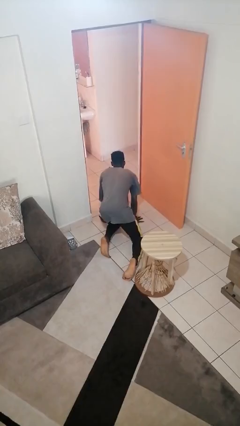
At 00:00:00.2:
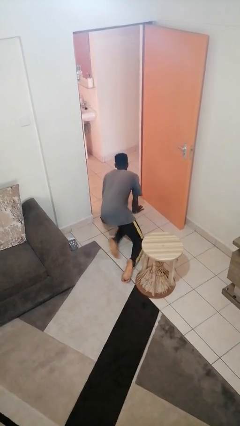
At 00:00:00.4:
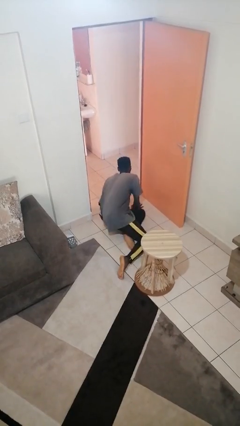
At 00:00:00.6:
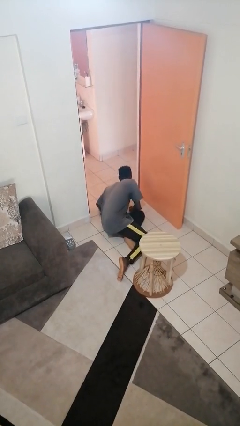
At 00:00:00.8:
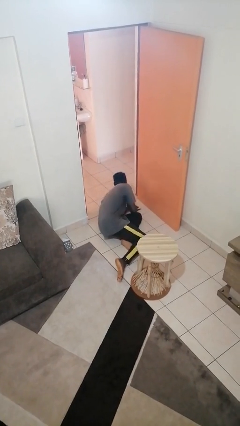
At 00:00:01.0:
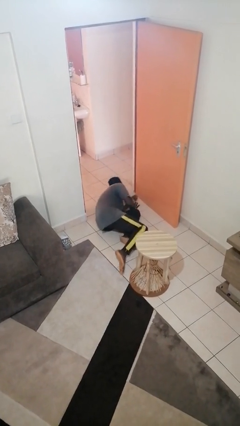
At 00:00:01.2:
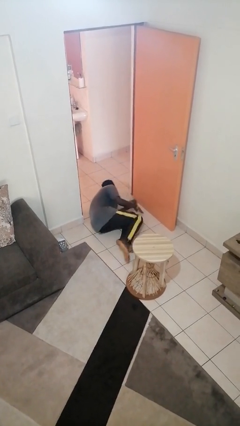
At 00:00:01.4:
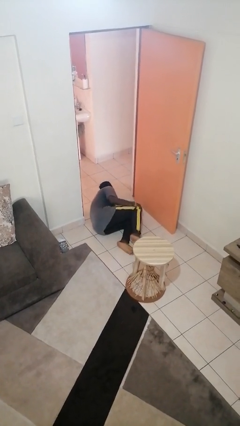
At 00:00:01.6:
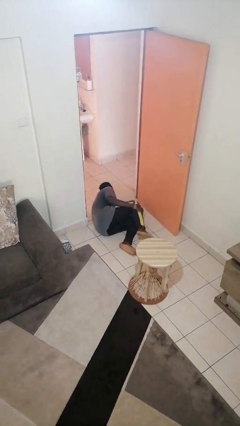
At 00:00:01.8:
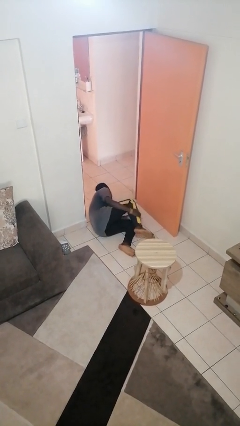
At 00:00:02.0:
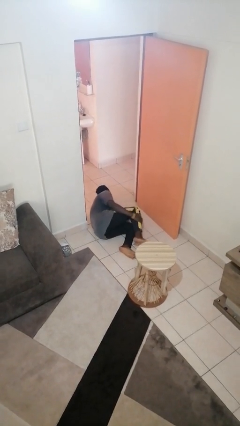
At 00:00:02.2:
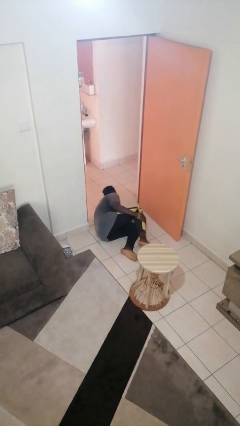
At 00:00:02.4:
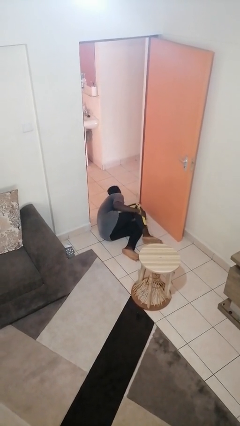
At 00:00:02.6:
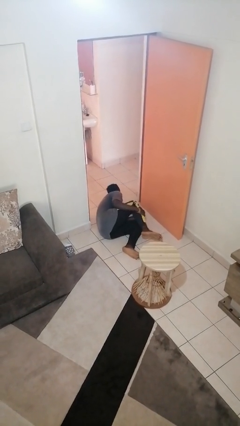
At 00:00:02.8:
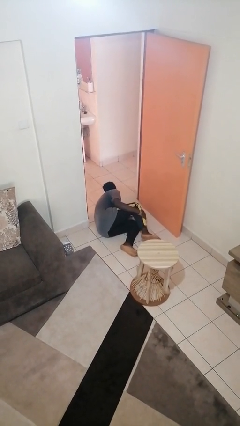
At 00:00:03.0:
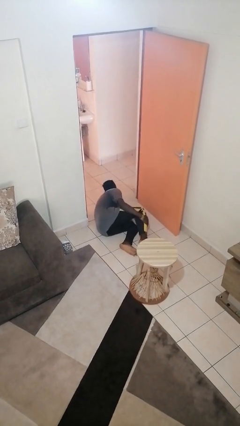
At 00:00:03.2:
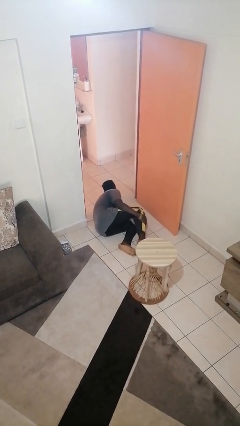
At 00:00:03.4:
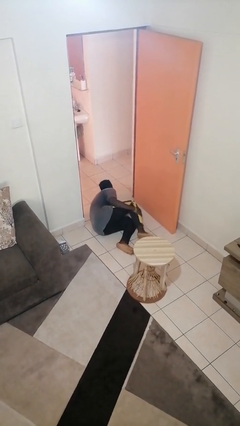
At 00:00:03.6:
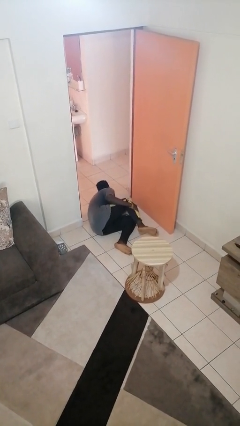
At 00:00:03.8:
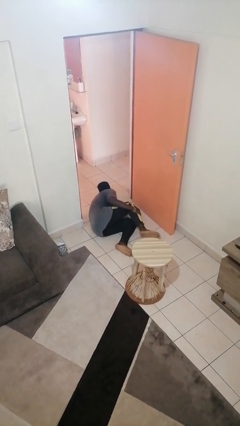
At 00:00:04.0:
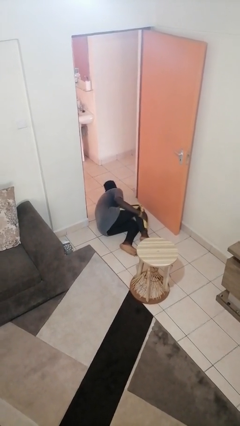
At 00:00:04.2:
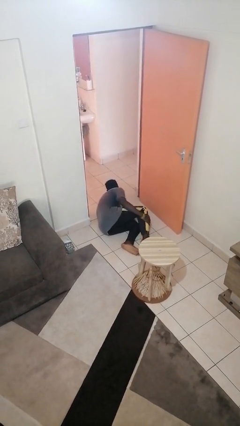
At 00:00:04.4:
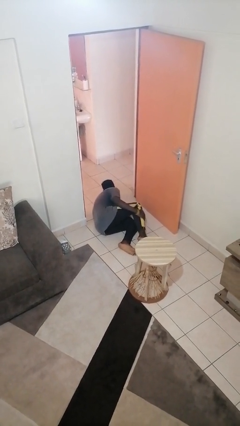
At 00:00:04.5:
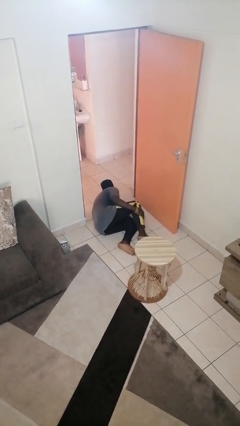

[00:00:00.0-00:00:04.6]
person lies down on floor

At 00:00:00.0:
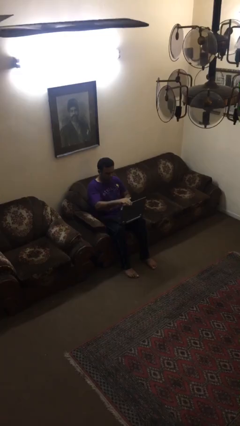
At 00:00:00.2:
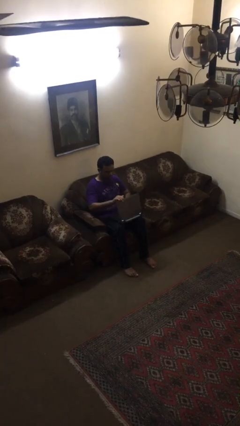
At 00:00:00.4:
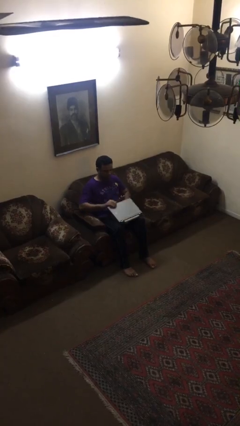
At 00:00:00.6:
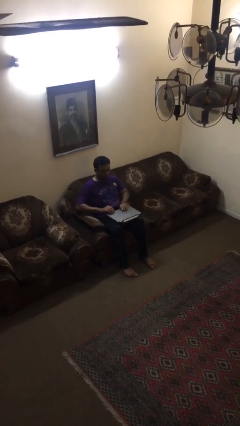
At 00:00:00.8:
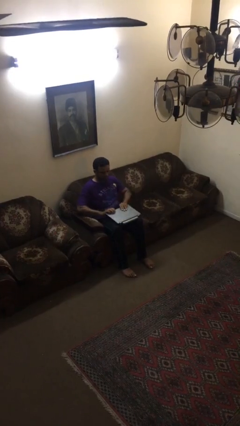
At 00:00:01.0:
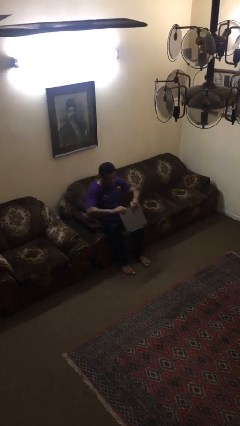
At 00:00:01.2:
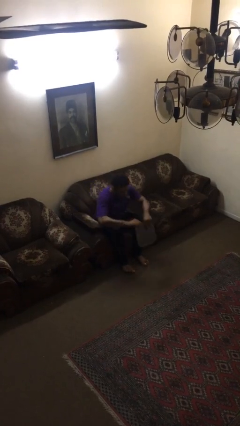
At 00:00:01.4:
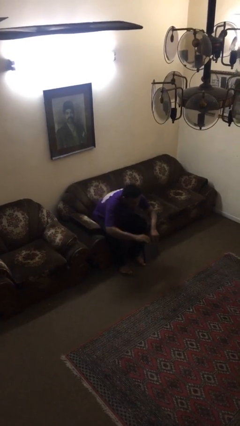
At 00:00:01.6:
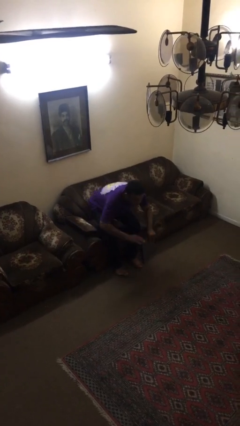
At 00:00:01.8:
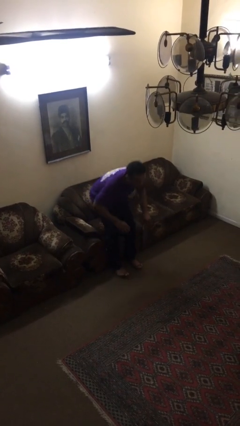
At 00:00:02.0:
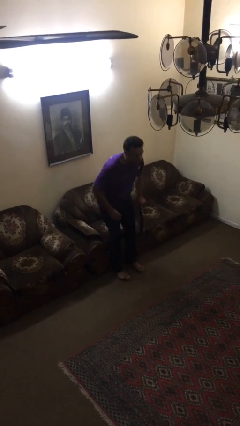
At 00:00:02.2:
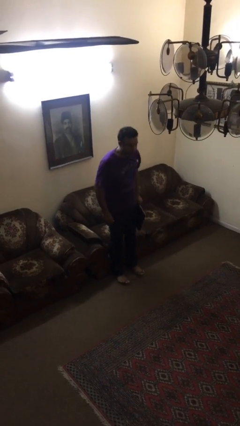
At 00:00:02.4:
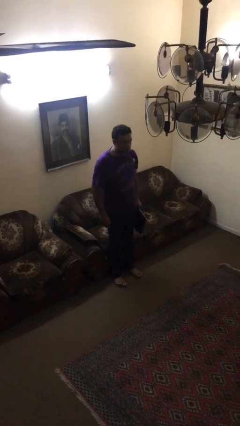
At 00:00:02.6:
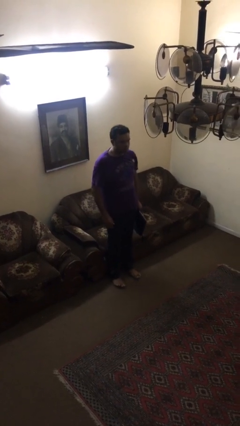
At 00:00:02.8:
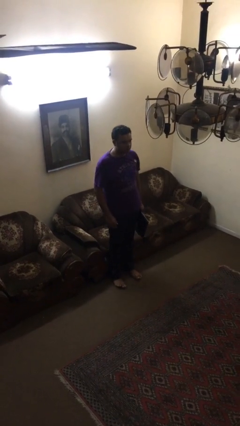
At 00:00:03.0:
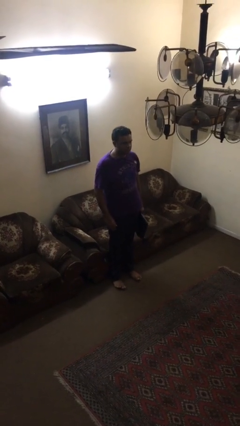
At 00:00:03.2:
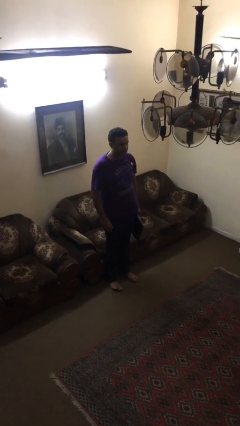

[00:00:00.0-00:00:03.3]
person stands up

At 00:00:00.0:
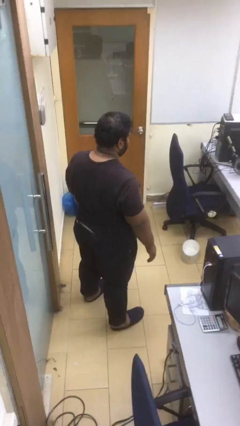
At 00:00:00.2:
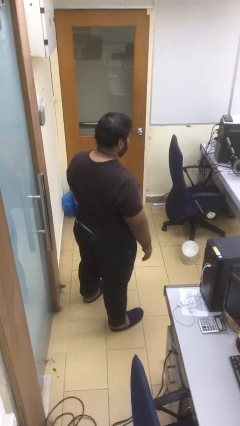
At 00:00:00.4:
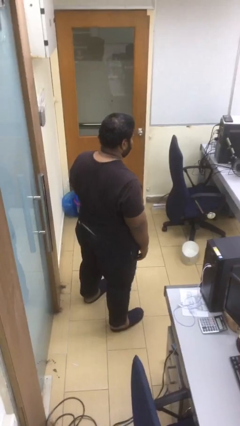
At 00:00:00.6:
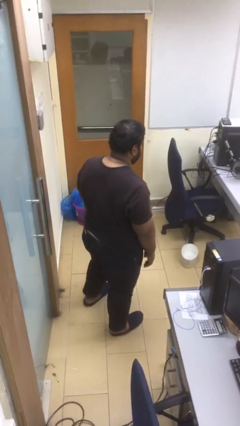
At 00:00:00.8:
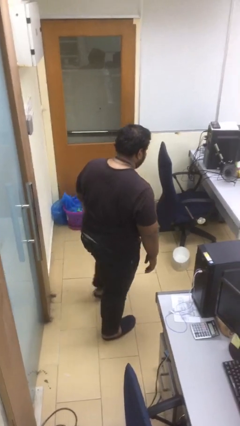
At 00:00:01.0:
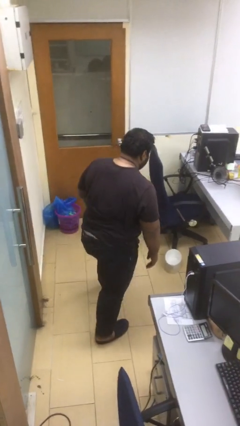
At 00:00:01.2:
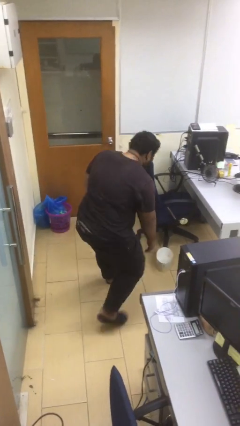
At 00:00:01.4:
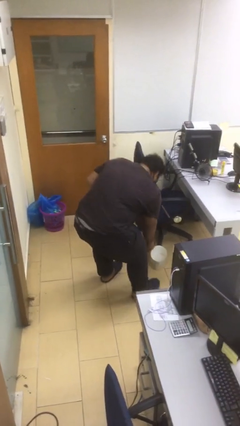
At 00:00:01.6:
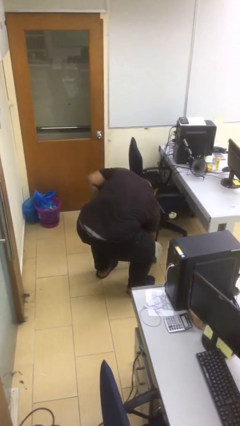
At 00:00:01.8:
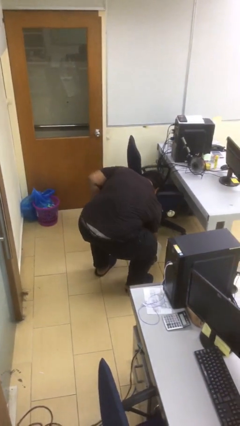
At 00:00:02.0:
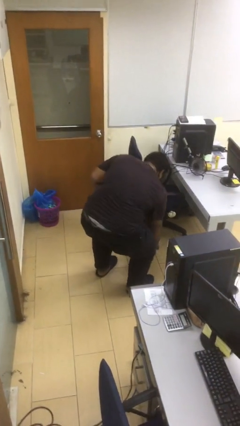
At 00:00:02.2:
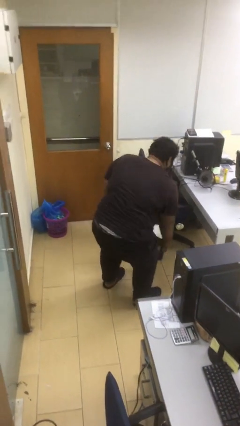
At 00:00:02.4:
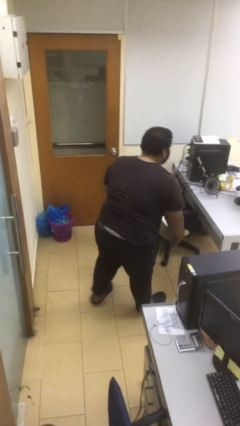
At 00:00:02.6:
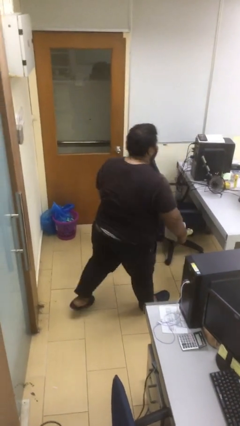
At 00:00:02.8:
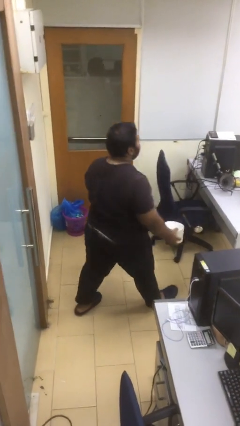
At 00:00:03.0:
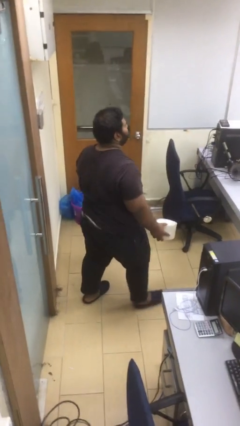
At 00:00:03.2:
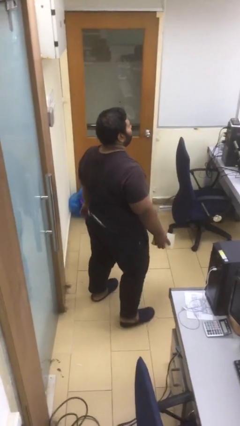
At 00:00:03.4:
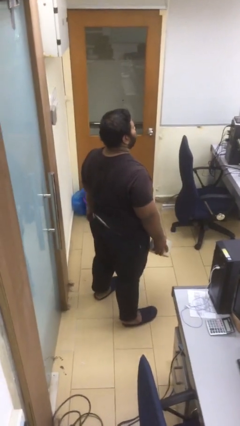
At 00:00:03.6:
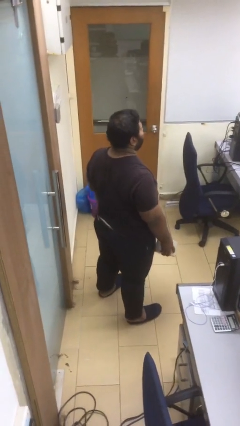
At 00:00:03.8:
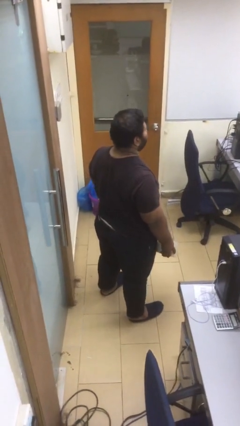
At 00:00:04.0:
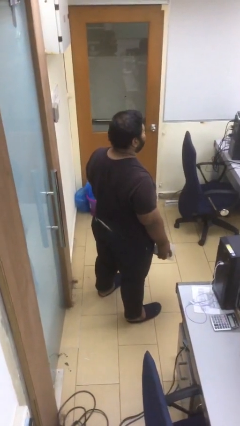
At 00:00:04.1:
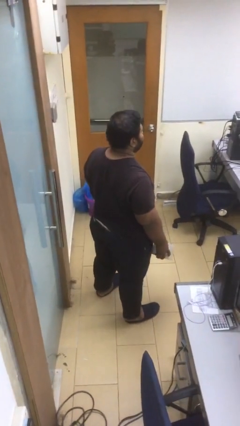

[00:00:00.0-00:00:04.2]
person picks up object from floor

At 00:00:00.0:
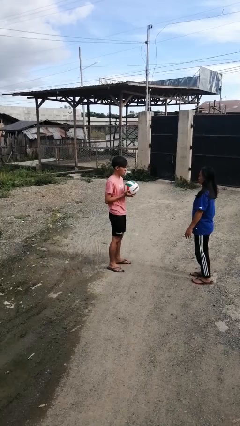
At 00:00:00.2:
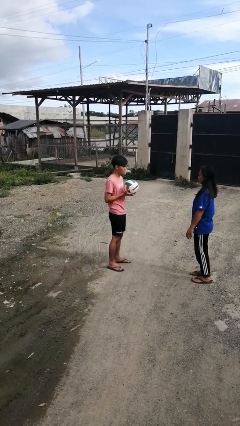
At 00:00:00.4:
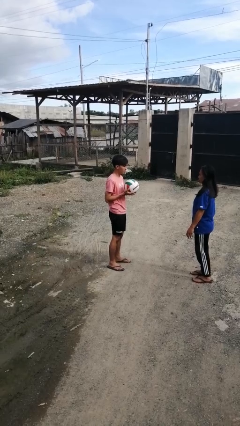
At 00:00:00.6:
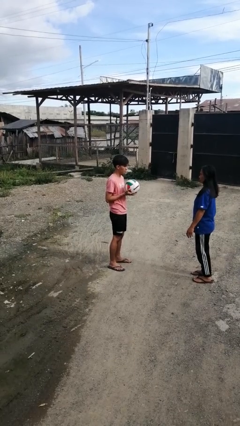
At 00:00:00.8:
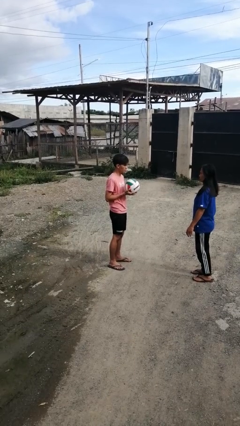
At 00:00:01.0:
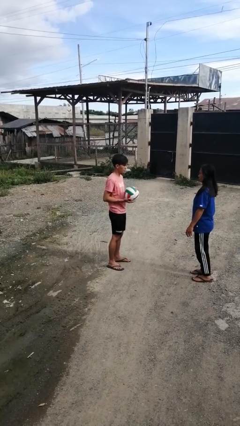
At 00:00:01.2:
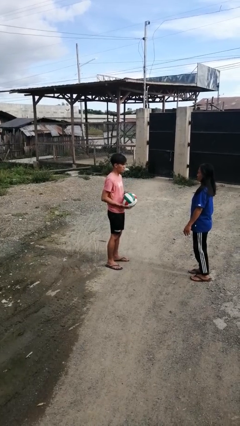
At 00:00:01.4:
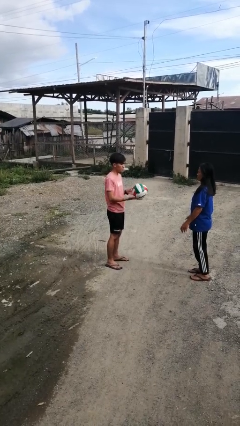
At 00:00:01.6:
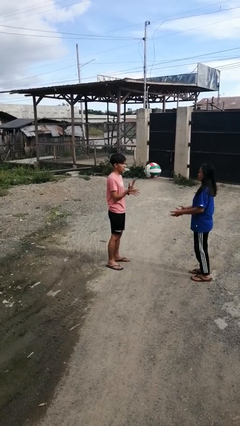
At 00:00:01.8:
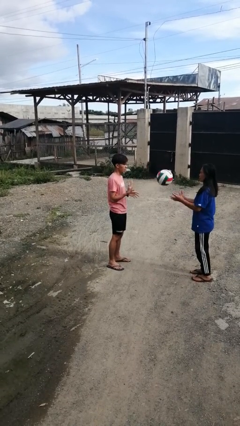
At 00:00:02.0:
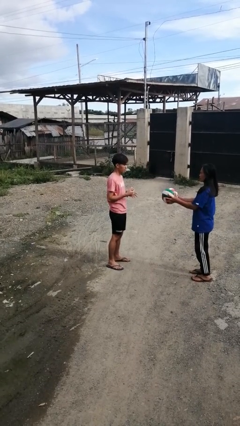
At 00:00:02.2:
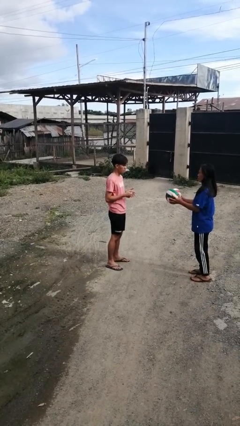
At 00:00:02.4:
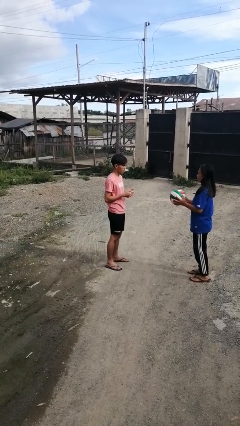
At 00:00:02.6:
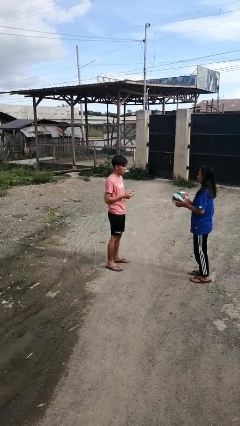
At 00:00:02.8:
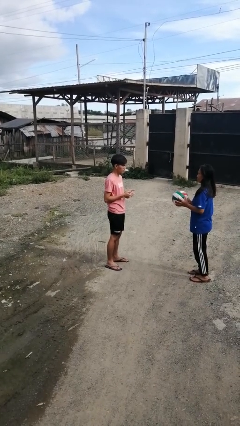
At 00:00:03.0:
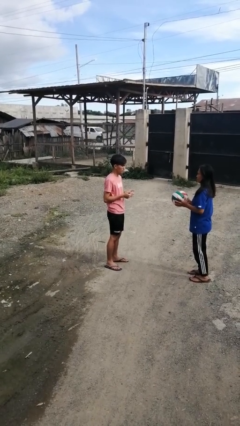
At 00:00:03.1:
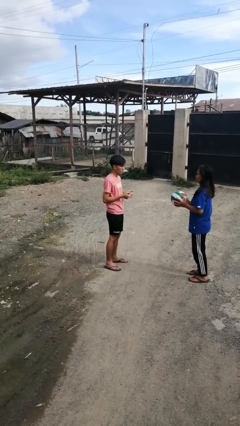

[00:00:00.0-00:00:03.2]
person throws object to person

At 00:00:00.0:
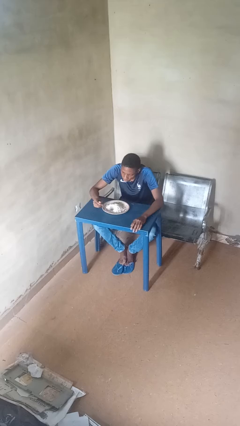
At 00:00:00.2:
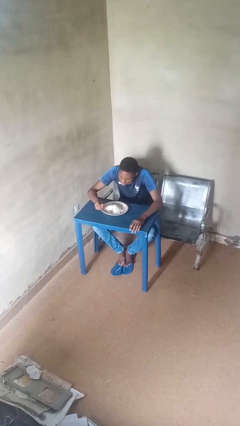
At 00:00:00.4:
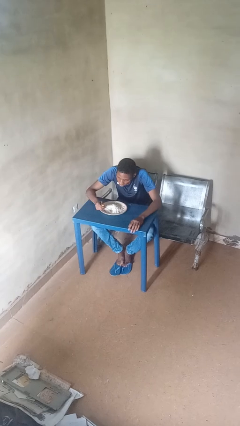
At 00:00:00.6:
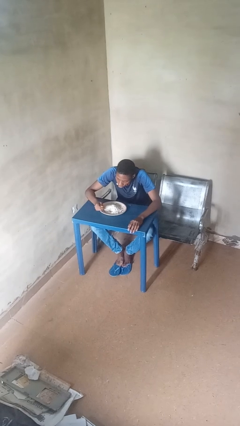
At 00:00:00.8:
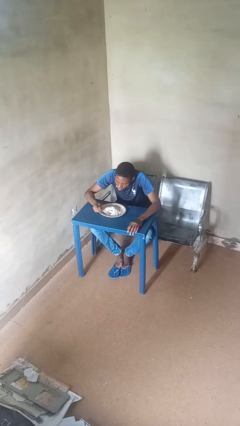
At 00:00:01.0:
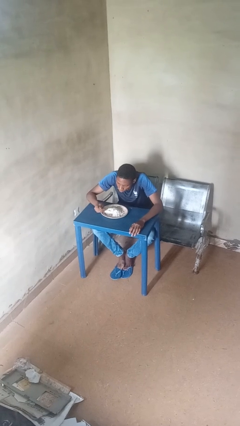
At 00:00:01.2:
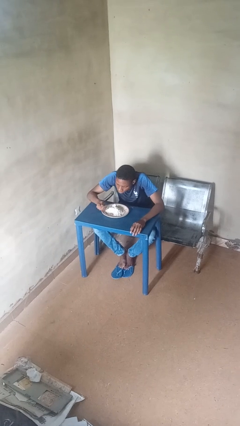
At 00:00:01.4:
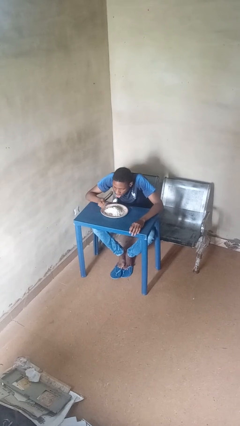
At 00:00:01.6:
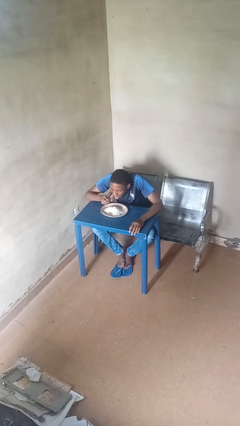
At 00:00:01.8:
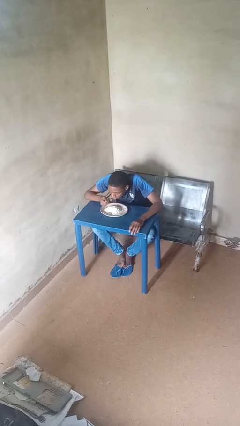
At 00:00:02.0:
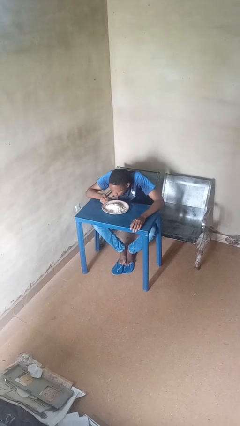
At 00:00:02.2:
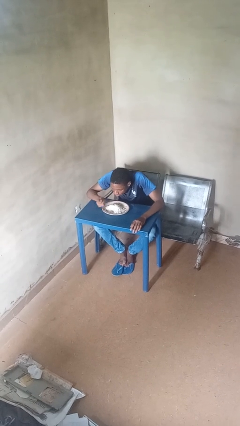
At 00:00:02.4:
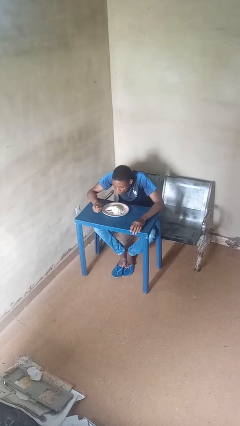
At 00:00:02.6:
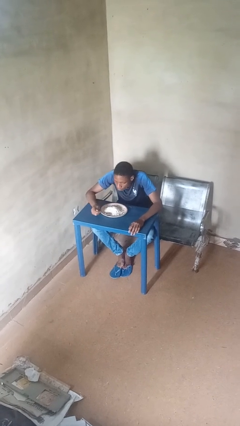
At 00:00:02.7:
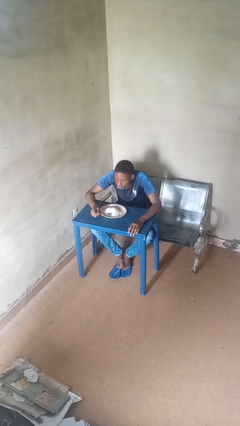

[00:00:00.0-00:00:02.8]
person eats with utensil
